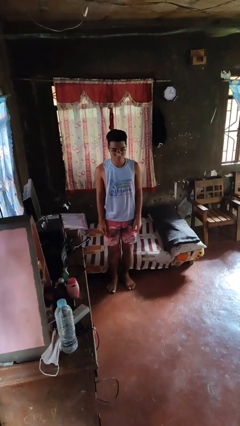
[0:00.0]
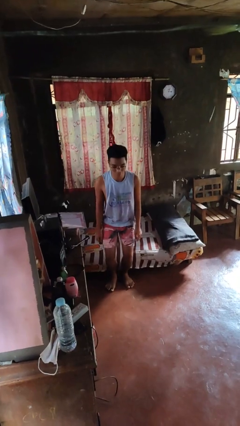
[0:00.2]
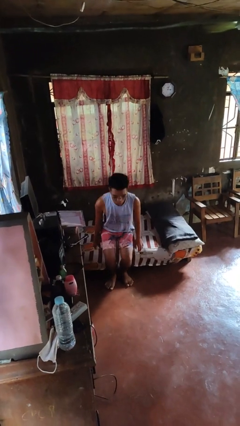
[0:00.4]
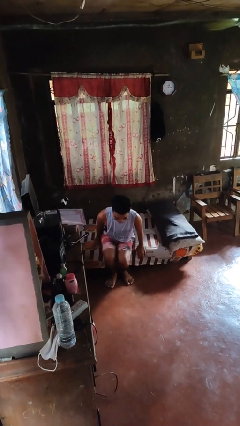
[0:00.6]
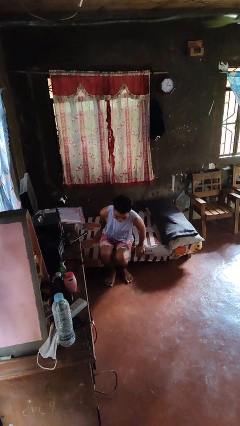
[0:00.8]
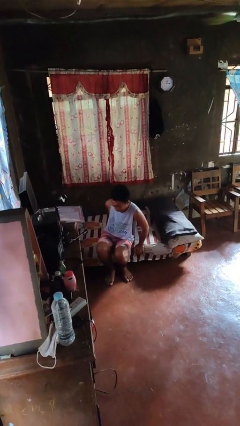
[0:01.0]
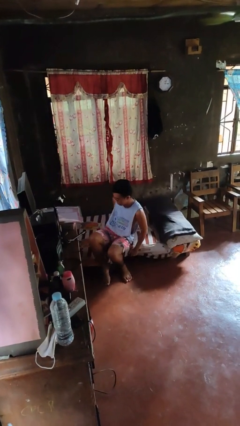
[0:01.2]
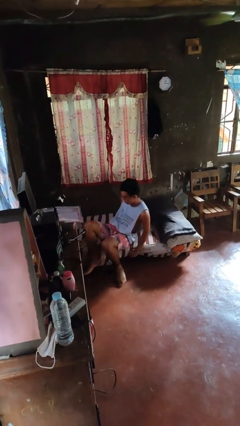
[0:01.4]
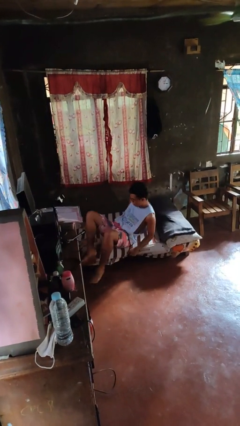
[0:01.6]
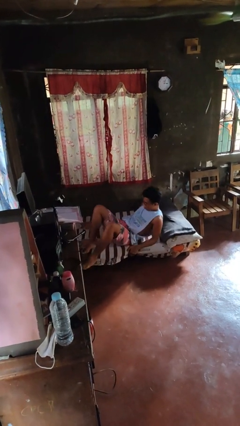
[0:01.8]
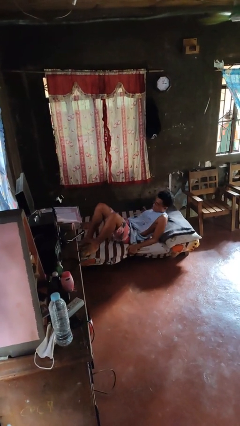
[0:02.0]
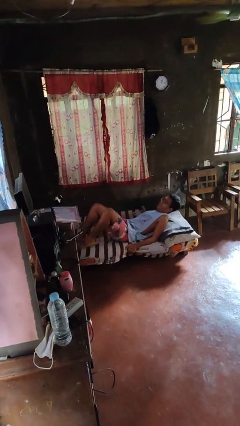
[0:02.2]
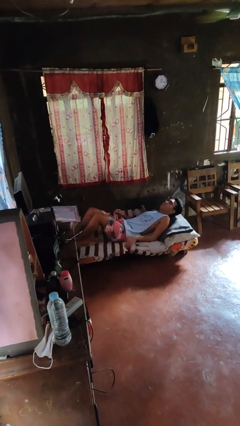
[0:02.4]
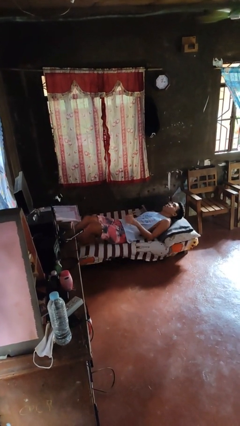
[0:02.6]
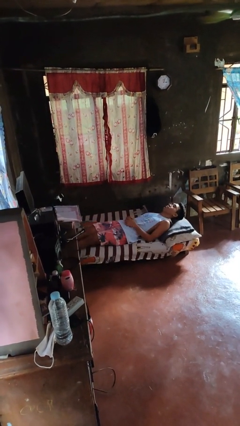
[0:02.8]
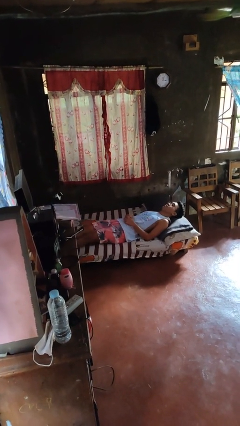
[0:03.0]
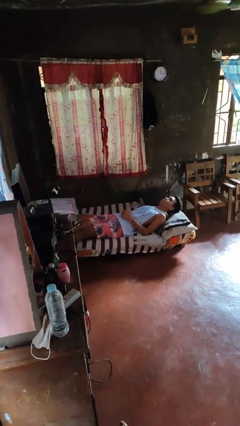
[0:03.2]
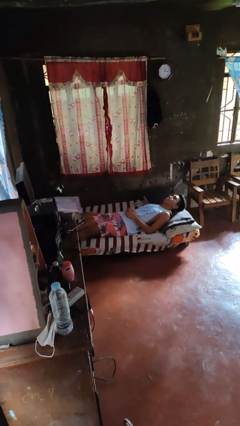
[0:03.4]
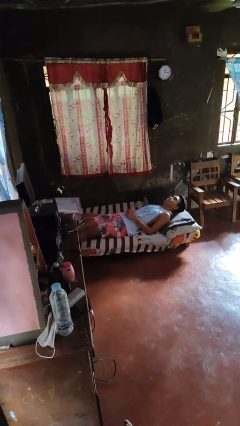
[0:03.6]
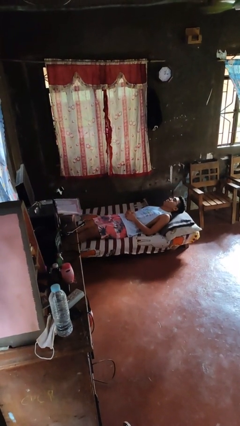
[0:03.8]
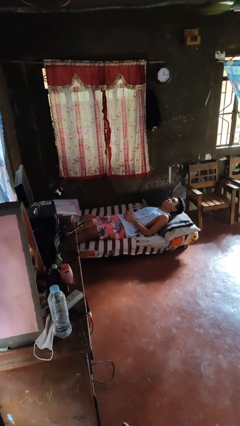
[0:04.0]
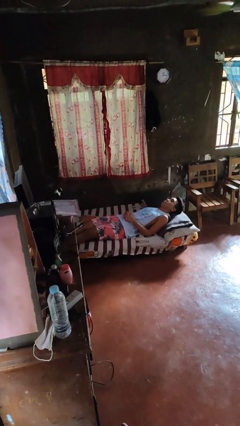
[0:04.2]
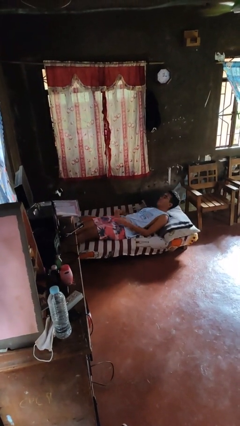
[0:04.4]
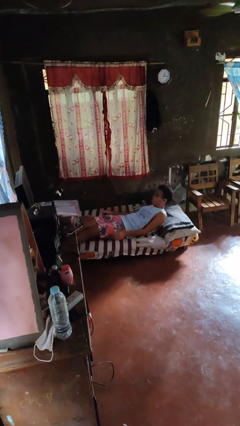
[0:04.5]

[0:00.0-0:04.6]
person lies down on bed

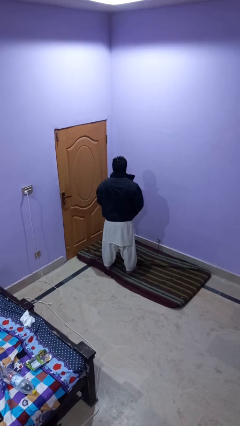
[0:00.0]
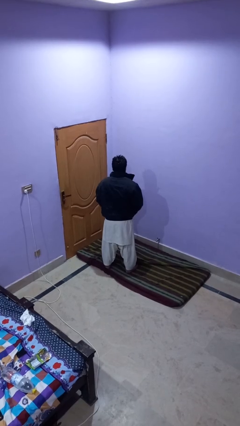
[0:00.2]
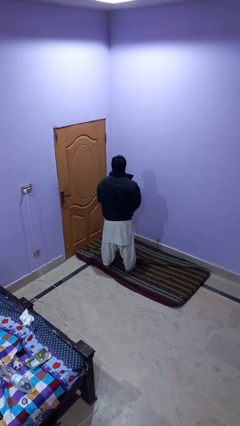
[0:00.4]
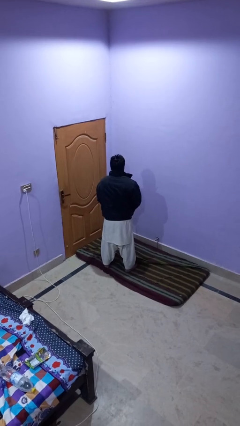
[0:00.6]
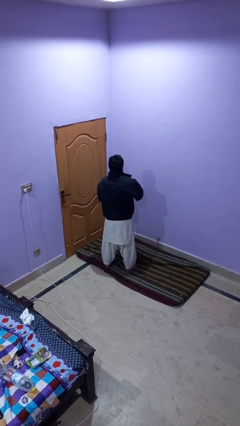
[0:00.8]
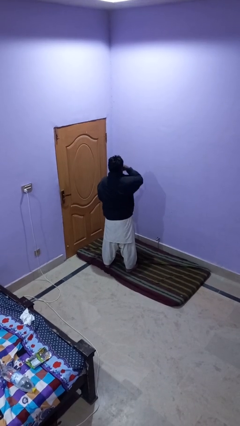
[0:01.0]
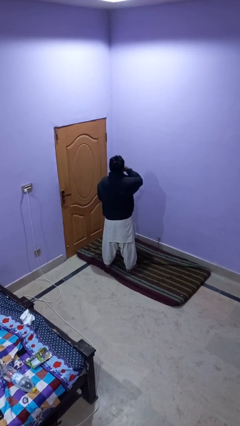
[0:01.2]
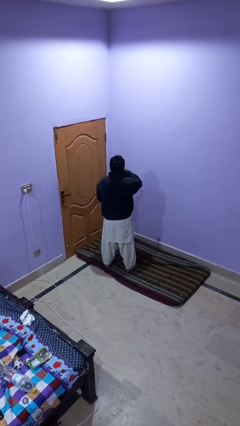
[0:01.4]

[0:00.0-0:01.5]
person zips up jacket

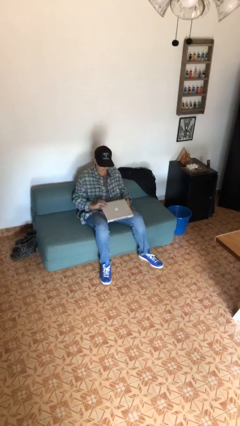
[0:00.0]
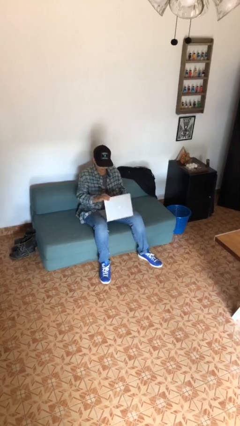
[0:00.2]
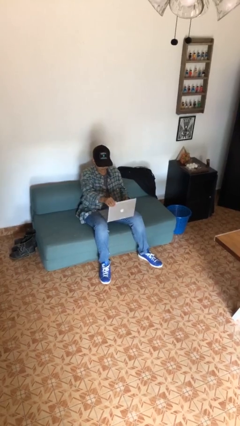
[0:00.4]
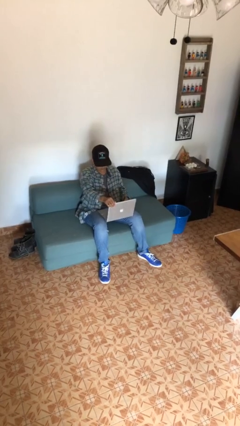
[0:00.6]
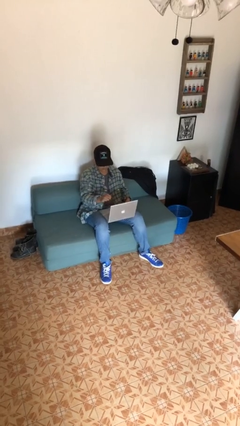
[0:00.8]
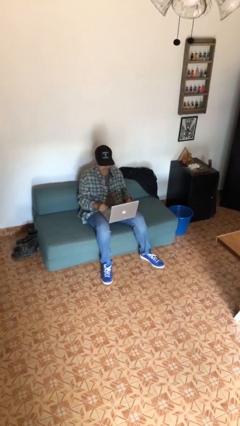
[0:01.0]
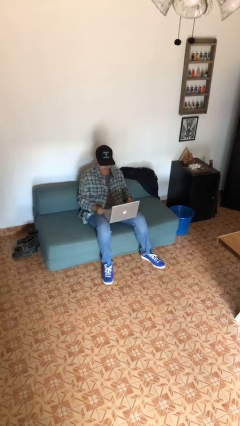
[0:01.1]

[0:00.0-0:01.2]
person opens laptop

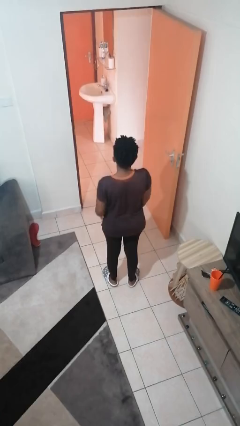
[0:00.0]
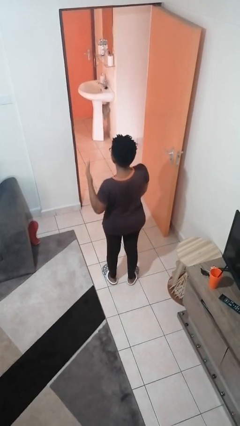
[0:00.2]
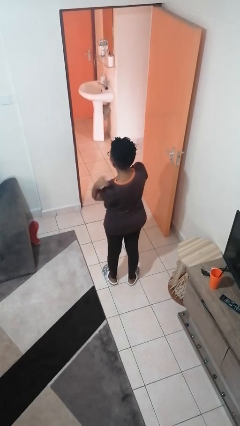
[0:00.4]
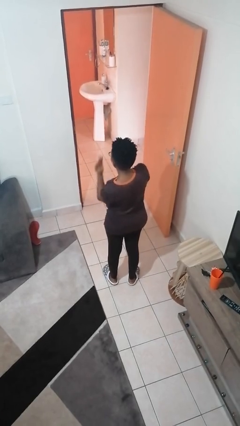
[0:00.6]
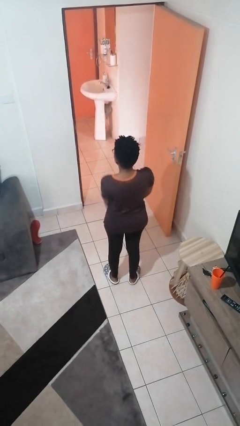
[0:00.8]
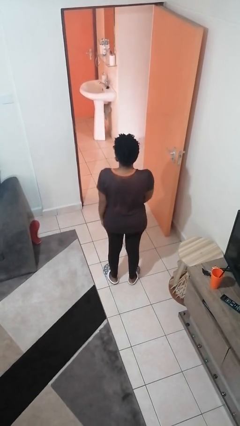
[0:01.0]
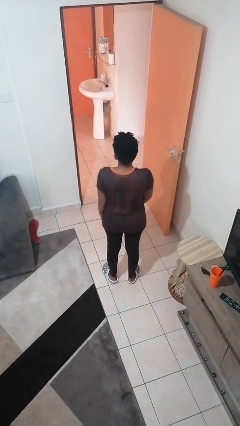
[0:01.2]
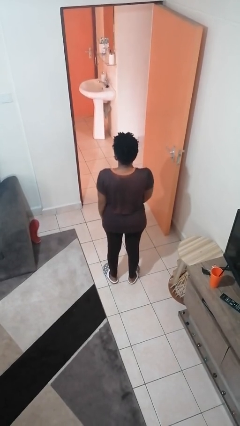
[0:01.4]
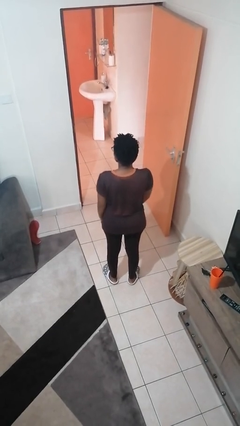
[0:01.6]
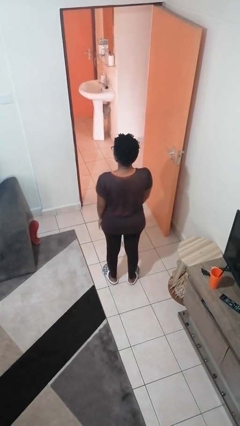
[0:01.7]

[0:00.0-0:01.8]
person karate chop

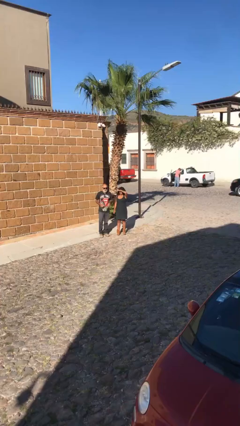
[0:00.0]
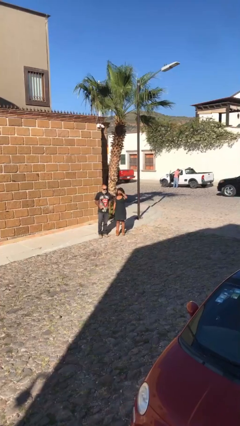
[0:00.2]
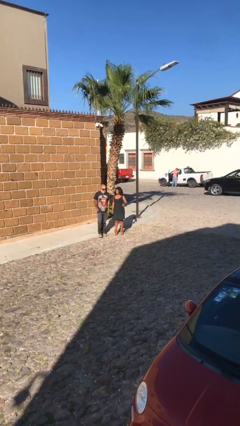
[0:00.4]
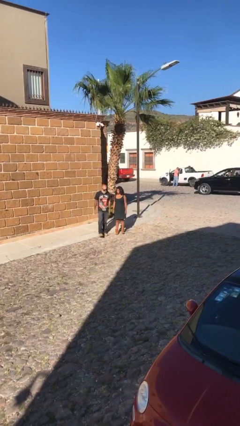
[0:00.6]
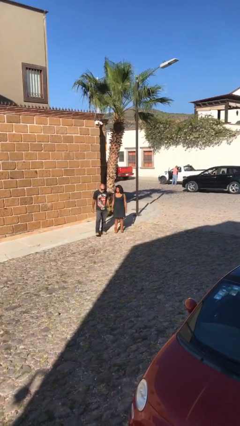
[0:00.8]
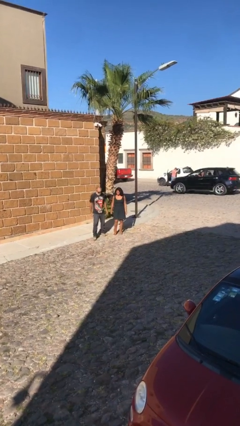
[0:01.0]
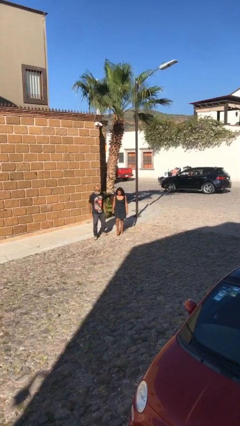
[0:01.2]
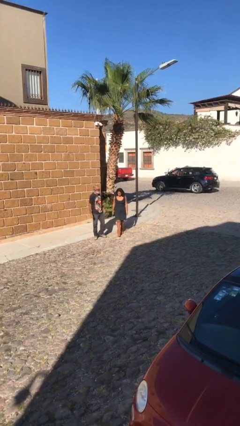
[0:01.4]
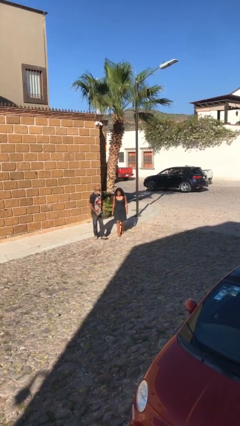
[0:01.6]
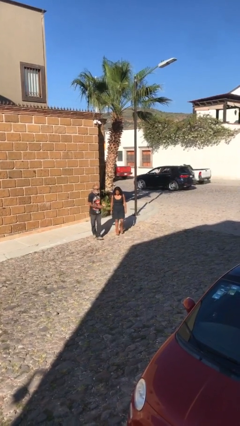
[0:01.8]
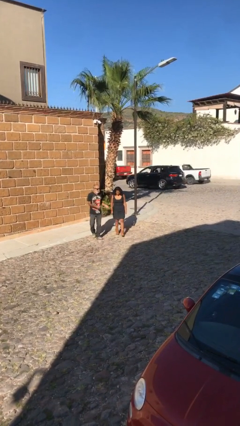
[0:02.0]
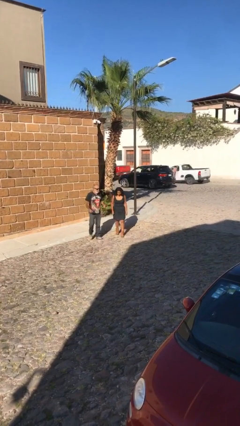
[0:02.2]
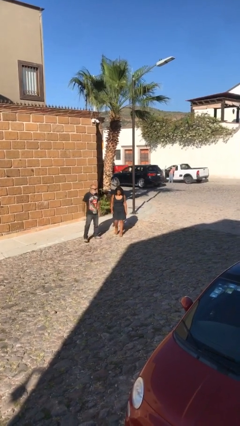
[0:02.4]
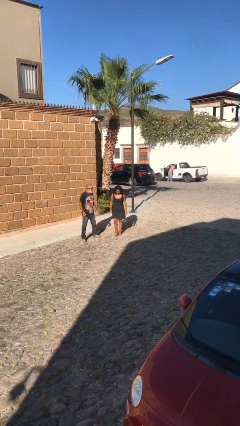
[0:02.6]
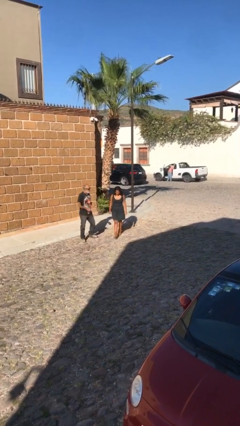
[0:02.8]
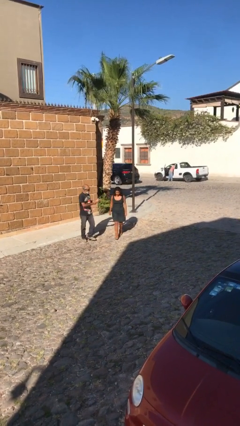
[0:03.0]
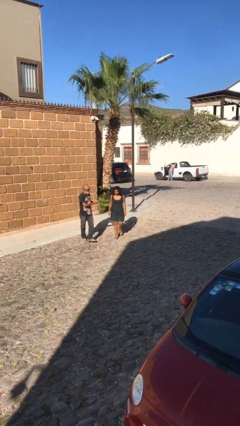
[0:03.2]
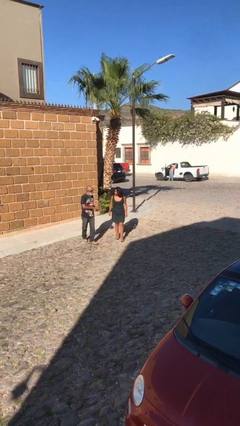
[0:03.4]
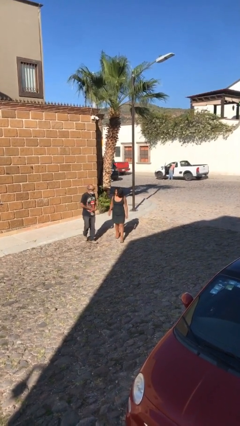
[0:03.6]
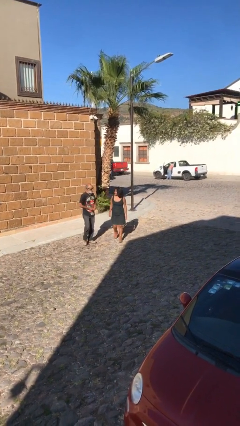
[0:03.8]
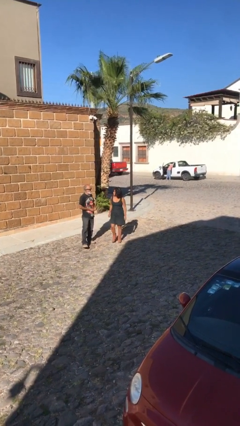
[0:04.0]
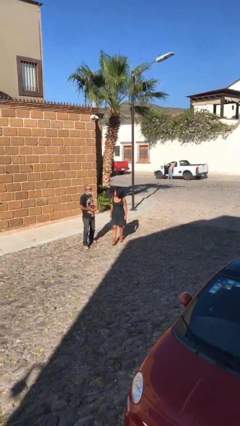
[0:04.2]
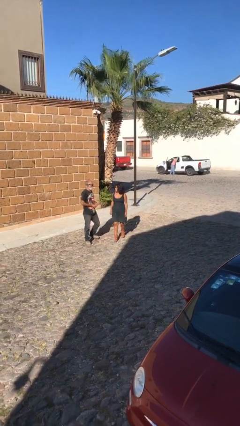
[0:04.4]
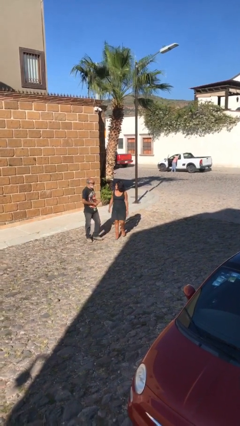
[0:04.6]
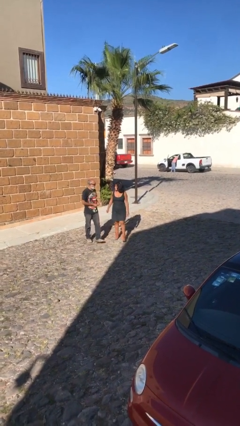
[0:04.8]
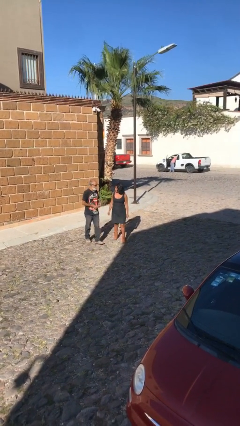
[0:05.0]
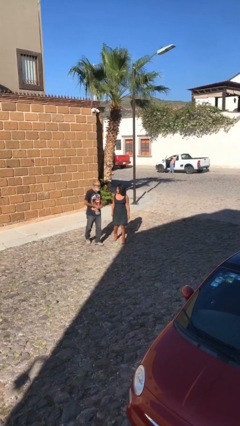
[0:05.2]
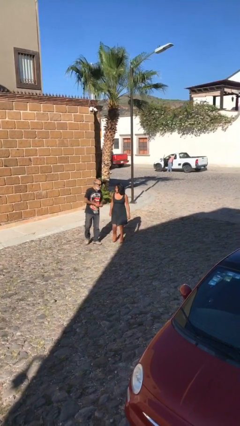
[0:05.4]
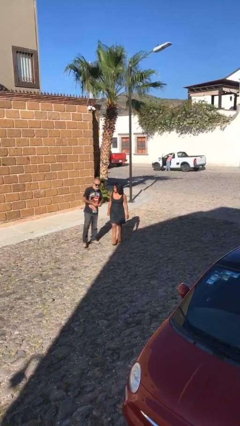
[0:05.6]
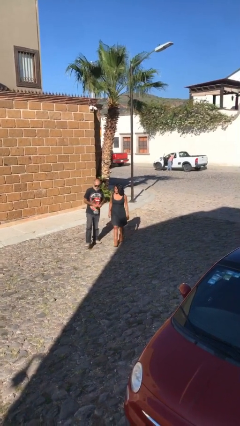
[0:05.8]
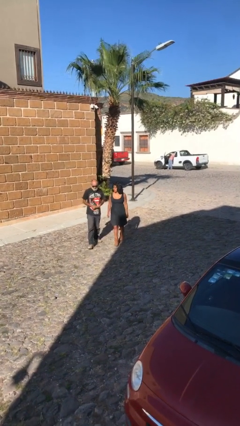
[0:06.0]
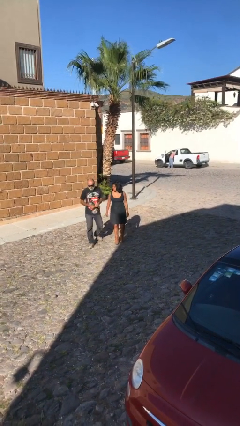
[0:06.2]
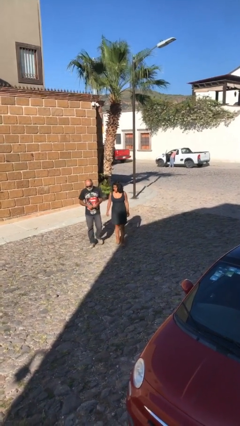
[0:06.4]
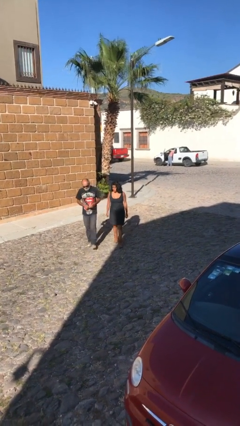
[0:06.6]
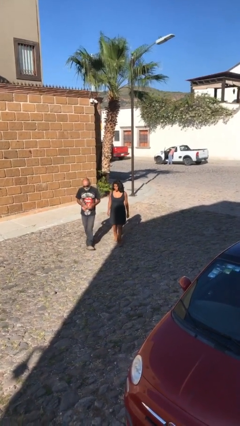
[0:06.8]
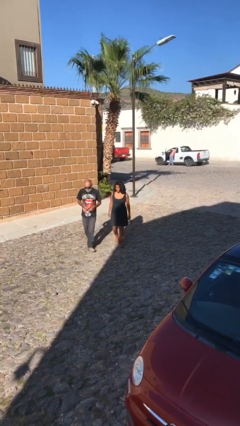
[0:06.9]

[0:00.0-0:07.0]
person talks to person

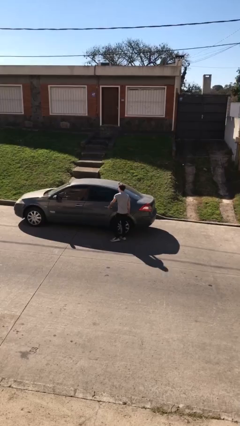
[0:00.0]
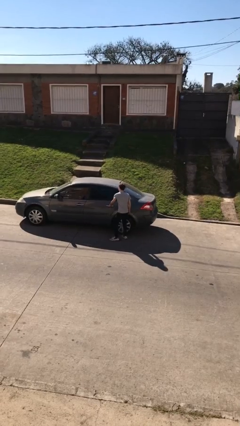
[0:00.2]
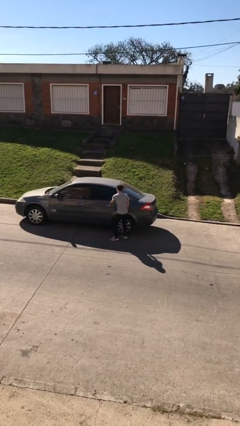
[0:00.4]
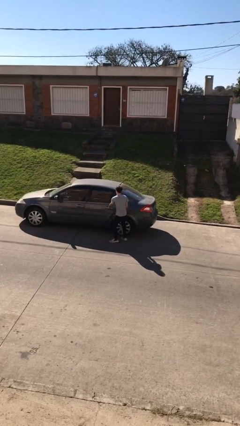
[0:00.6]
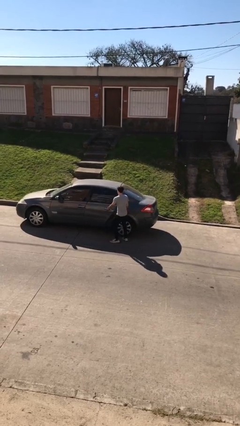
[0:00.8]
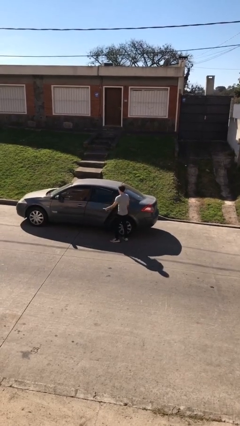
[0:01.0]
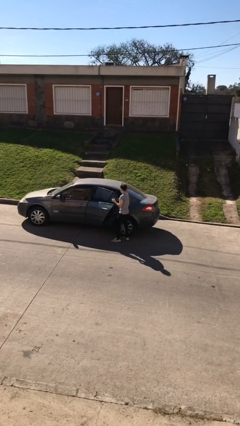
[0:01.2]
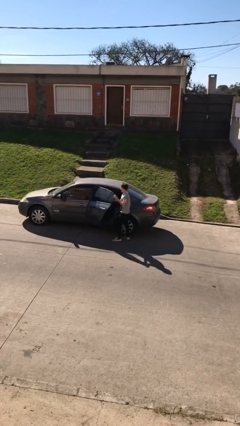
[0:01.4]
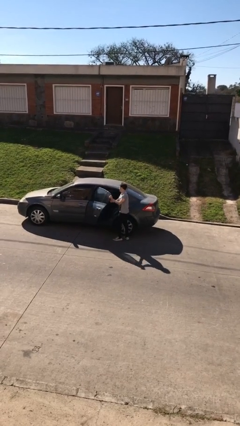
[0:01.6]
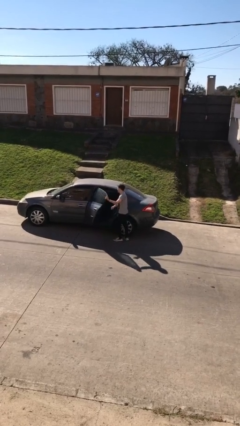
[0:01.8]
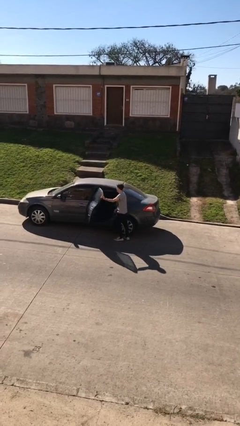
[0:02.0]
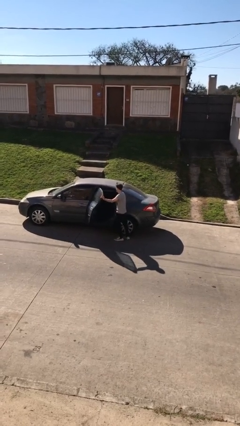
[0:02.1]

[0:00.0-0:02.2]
person opens car door
